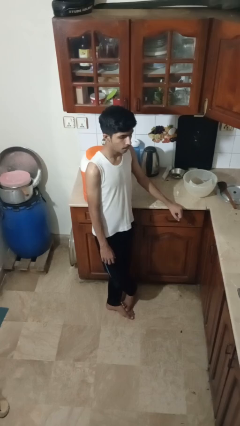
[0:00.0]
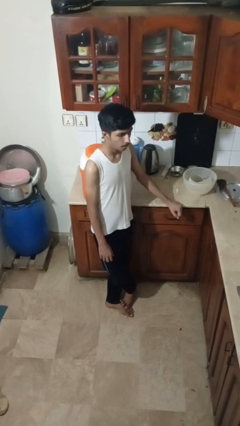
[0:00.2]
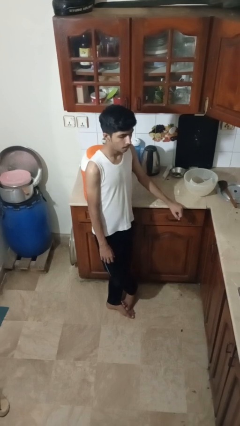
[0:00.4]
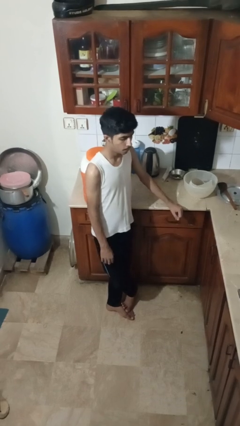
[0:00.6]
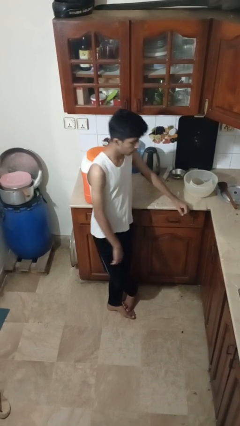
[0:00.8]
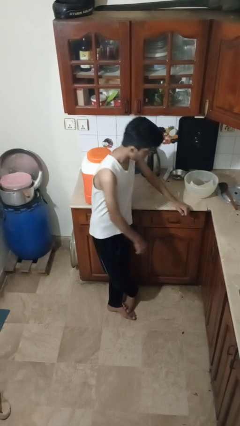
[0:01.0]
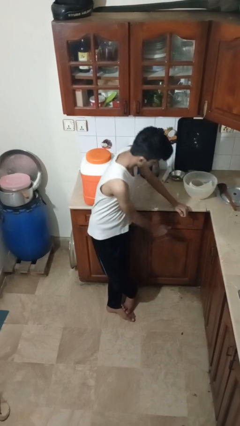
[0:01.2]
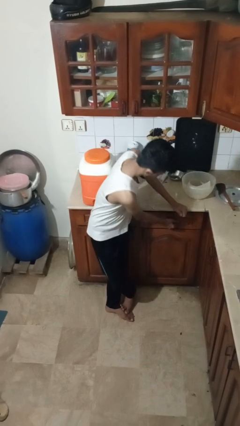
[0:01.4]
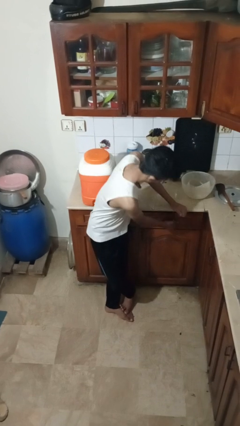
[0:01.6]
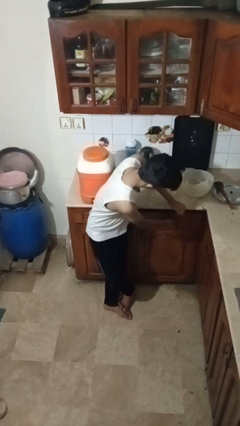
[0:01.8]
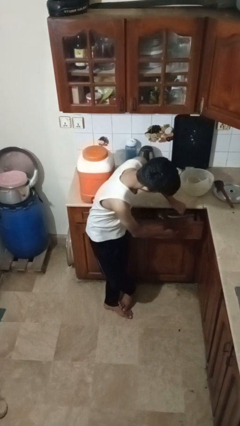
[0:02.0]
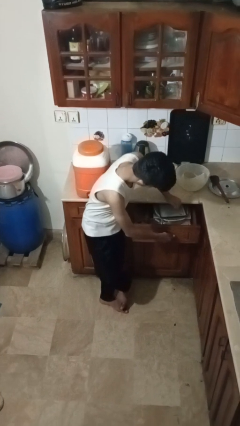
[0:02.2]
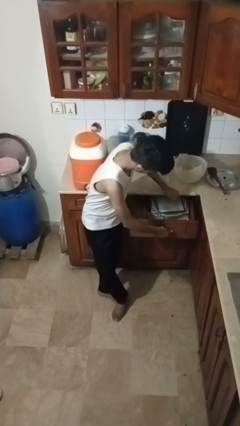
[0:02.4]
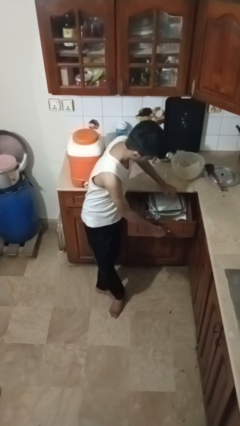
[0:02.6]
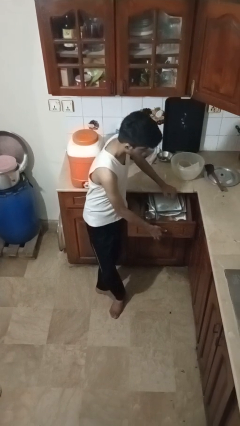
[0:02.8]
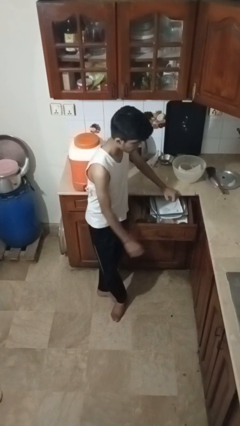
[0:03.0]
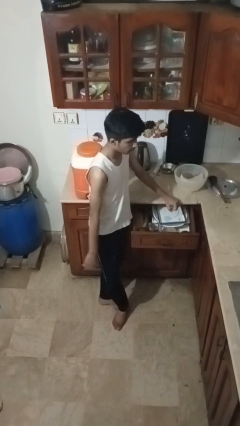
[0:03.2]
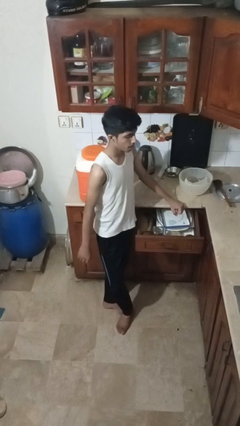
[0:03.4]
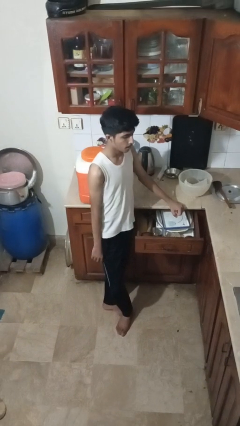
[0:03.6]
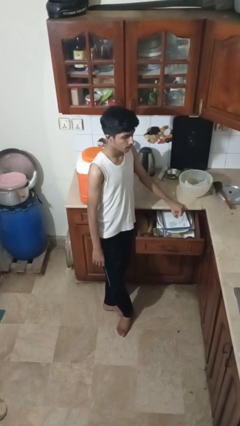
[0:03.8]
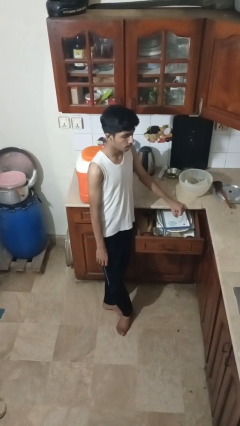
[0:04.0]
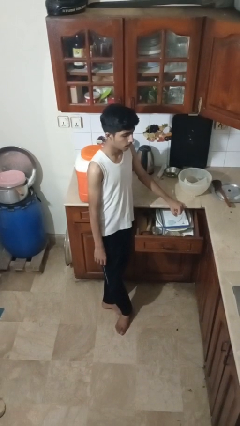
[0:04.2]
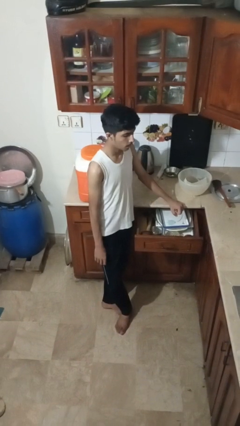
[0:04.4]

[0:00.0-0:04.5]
person opens kitchen drawer

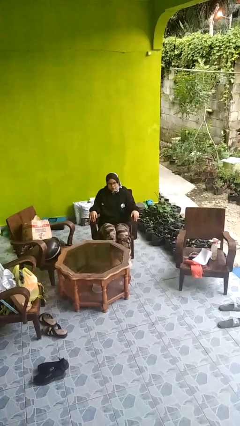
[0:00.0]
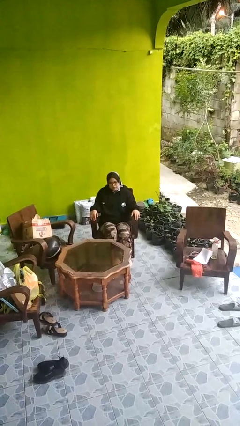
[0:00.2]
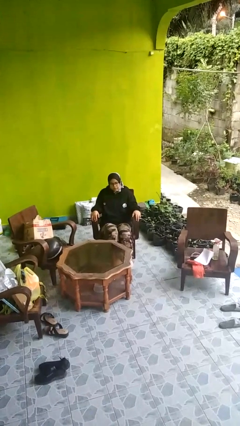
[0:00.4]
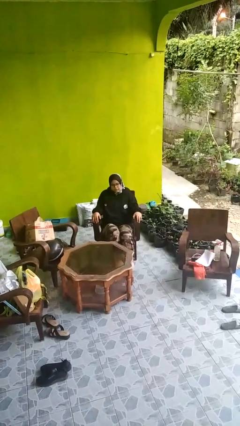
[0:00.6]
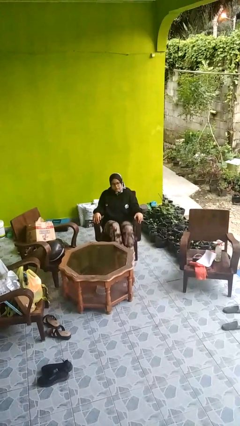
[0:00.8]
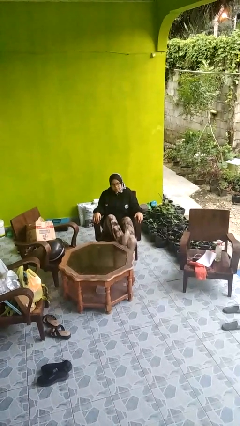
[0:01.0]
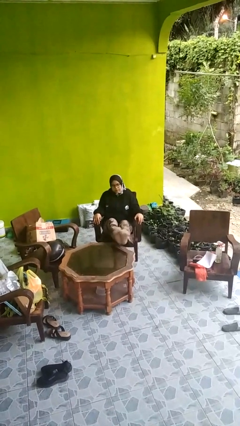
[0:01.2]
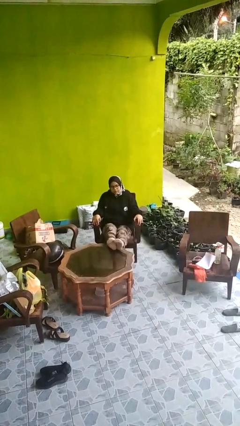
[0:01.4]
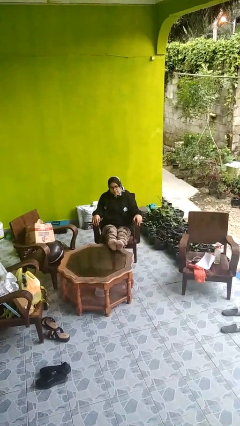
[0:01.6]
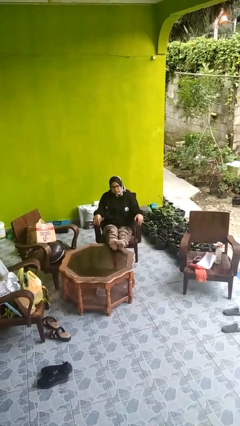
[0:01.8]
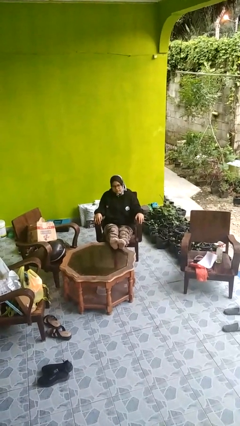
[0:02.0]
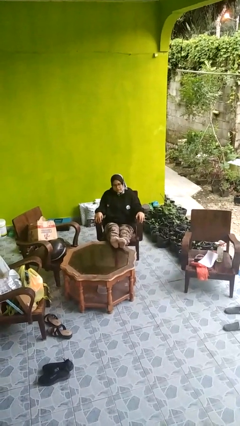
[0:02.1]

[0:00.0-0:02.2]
person puts feet up

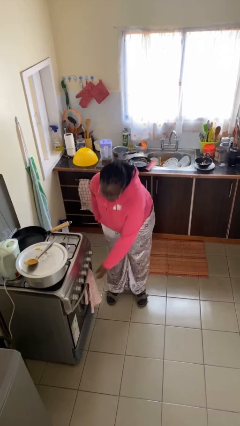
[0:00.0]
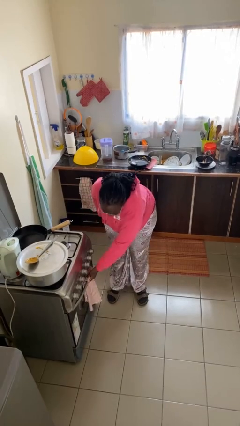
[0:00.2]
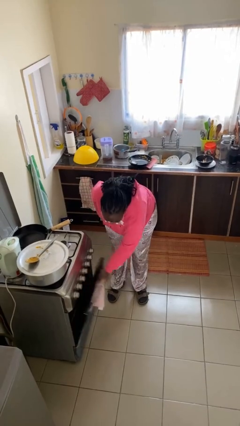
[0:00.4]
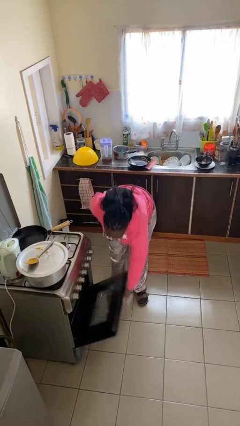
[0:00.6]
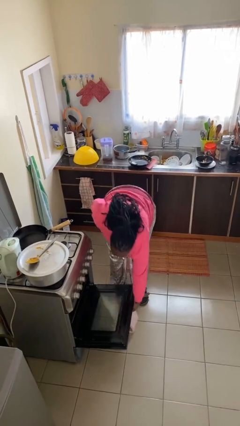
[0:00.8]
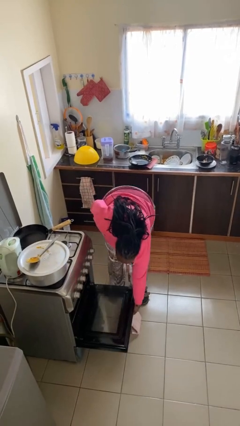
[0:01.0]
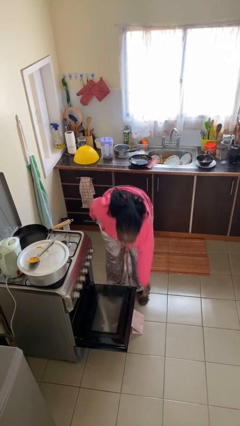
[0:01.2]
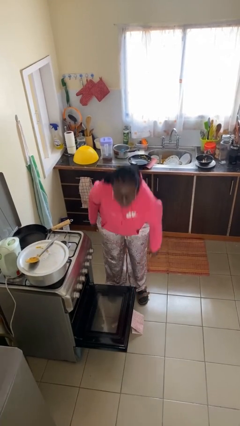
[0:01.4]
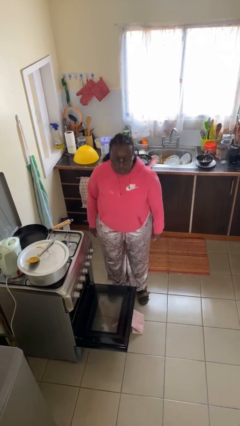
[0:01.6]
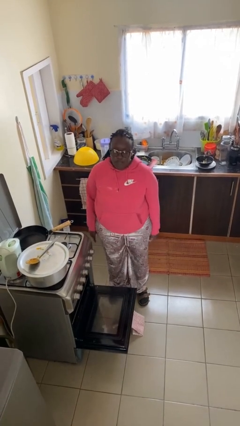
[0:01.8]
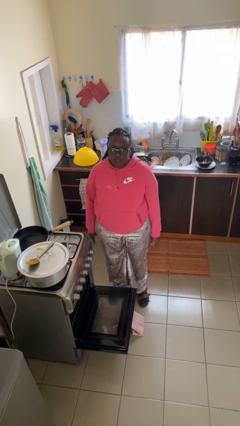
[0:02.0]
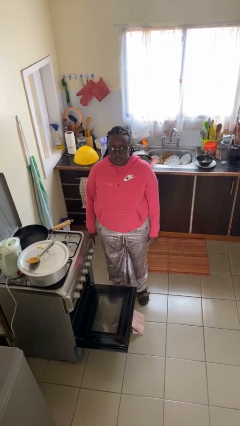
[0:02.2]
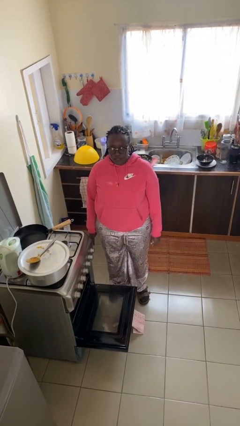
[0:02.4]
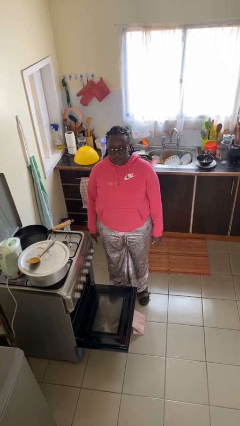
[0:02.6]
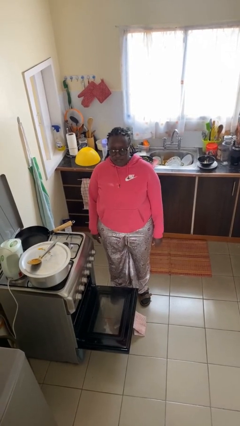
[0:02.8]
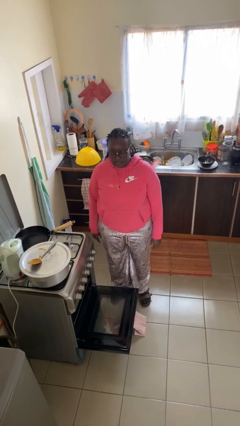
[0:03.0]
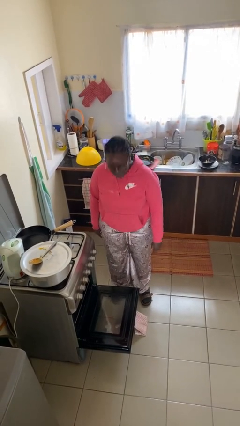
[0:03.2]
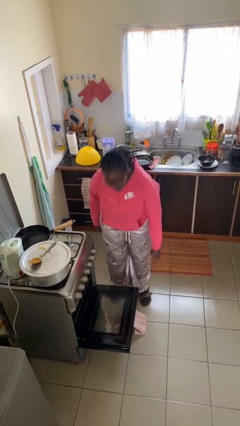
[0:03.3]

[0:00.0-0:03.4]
person opens oven door

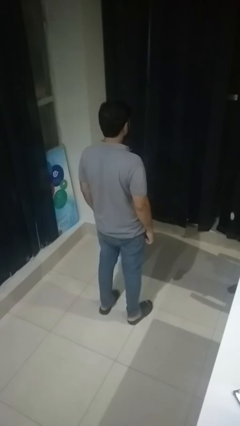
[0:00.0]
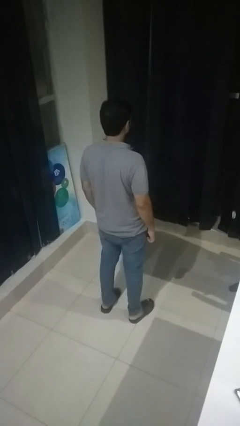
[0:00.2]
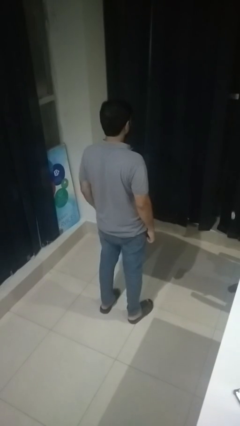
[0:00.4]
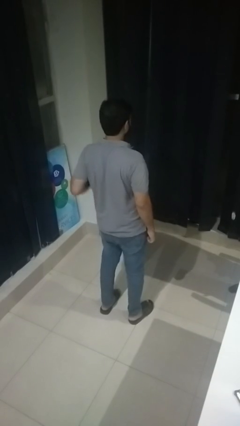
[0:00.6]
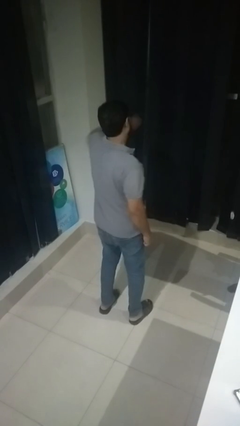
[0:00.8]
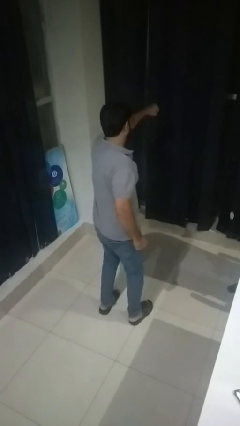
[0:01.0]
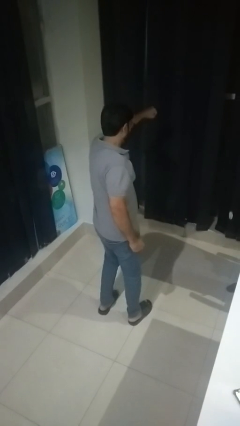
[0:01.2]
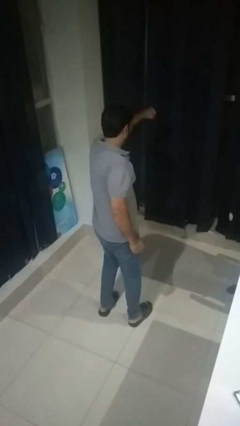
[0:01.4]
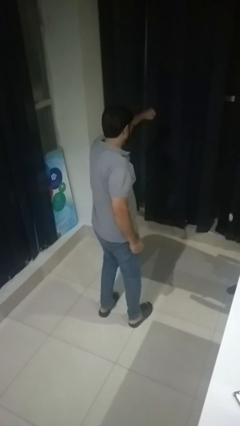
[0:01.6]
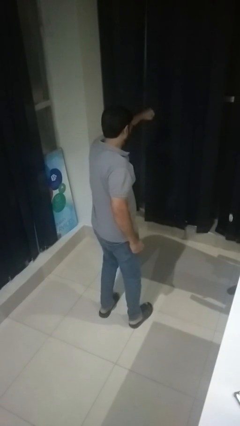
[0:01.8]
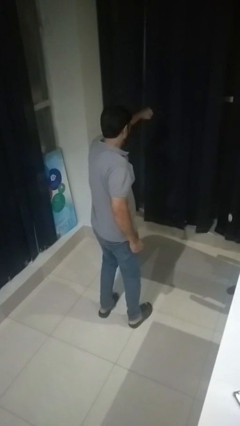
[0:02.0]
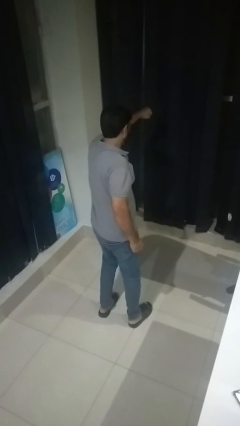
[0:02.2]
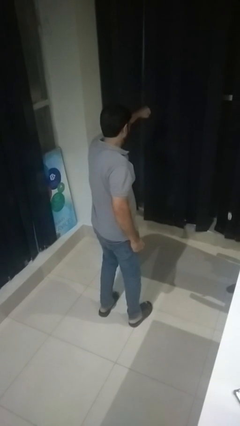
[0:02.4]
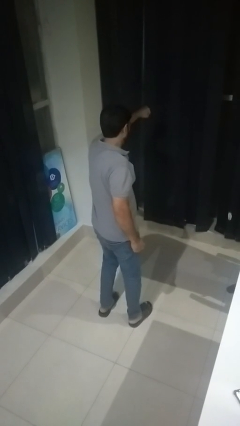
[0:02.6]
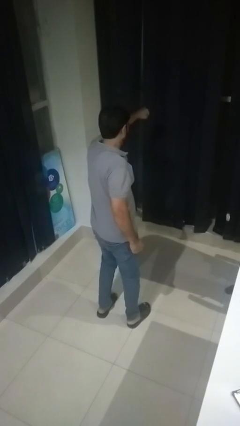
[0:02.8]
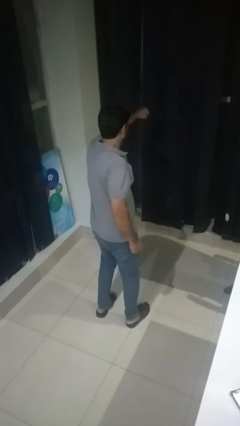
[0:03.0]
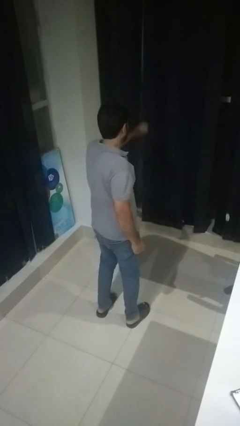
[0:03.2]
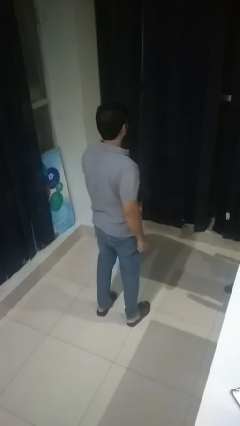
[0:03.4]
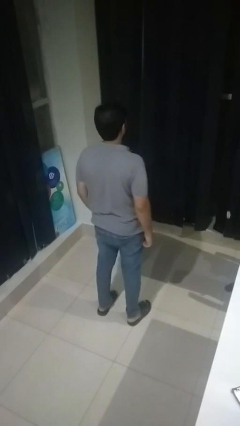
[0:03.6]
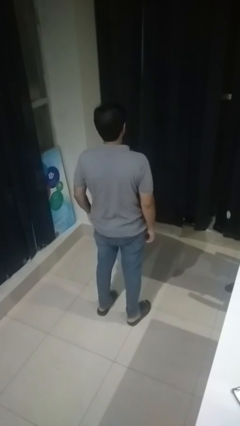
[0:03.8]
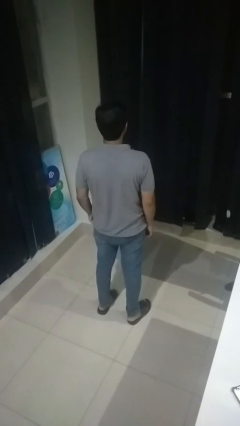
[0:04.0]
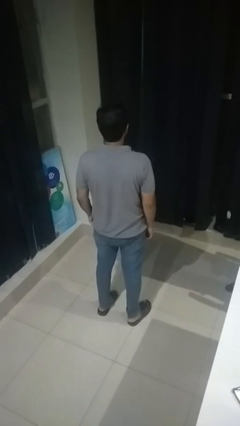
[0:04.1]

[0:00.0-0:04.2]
person punches

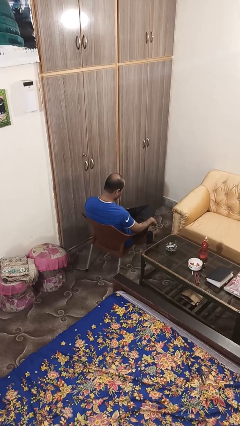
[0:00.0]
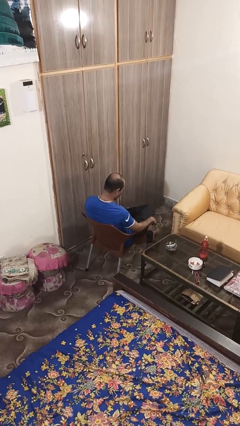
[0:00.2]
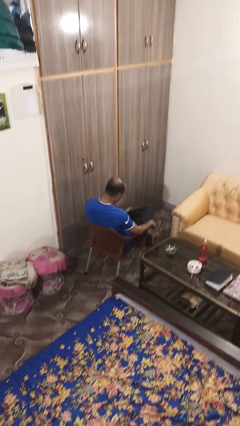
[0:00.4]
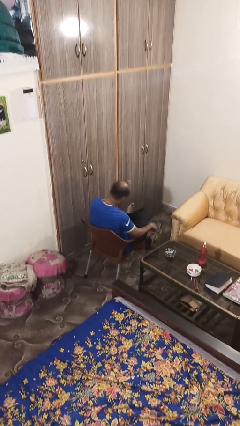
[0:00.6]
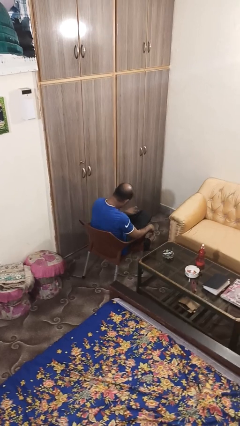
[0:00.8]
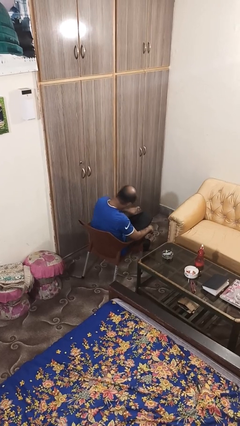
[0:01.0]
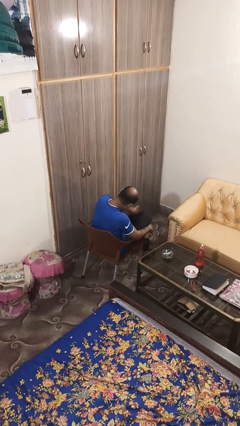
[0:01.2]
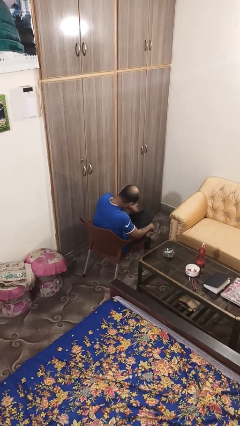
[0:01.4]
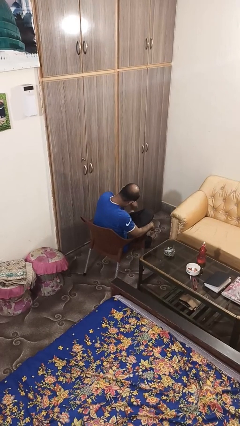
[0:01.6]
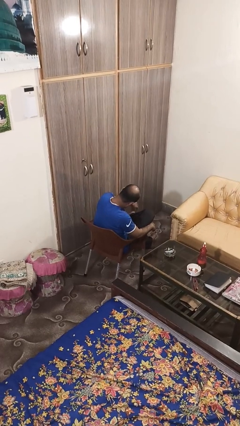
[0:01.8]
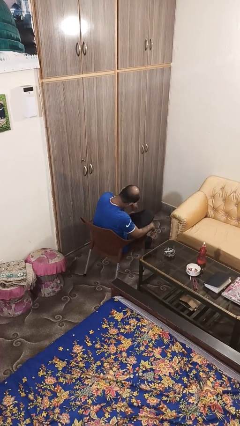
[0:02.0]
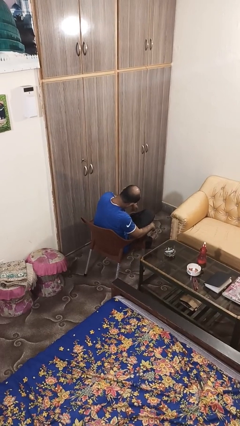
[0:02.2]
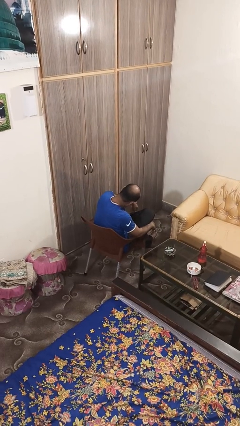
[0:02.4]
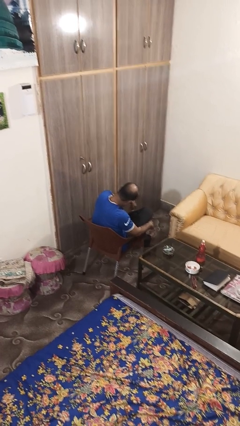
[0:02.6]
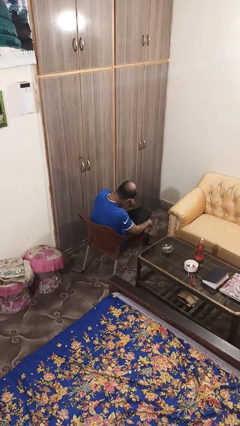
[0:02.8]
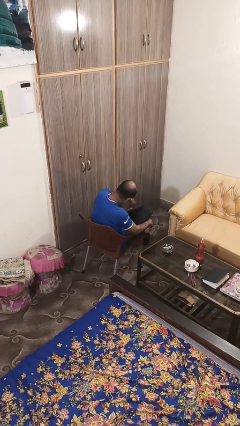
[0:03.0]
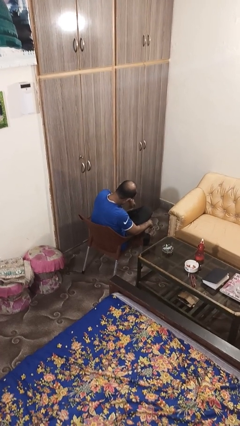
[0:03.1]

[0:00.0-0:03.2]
person swats bug

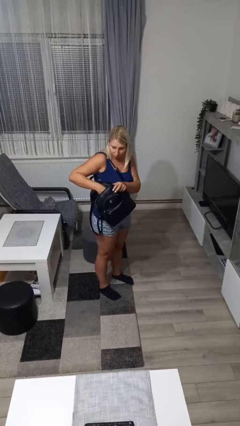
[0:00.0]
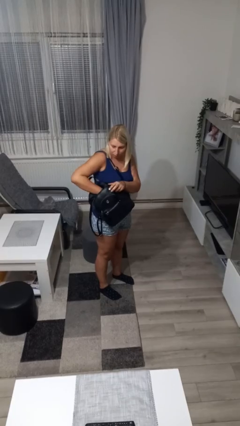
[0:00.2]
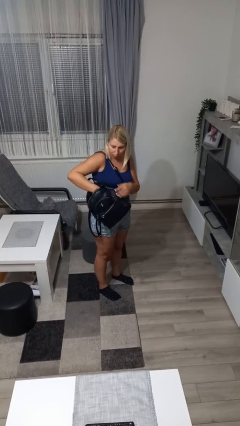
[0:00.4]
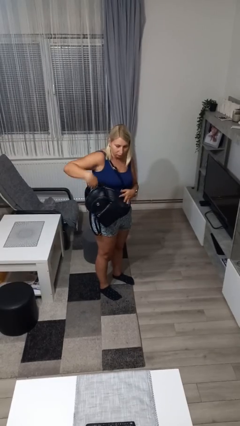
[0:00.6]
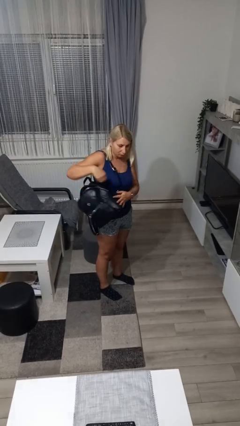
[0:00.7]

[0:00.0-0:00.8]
person puts object into backpack
